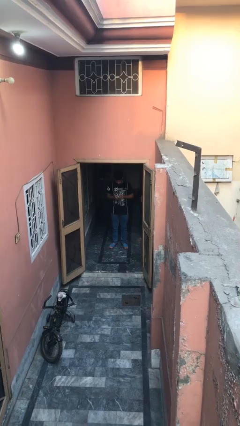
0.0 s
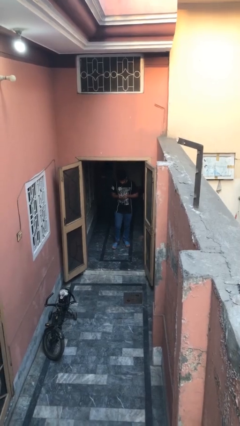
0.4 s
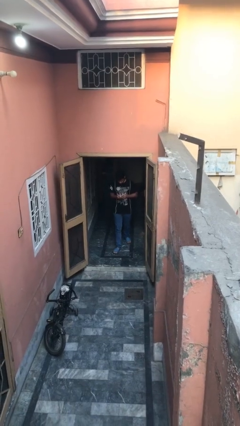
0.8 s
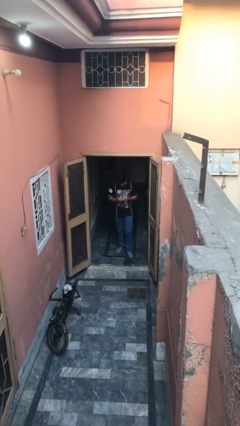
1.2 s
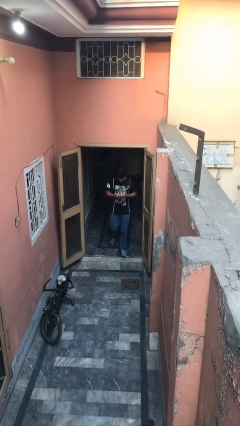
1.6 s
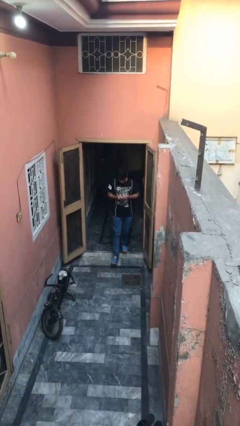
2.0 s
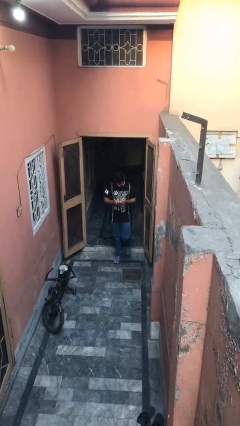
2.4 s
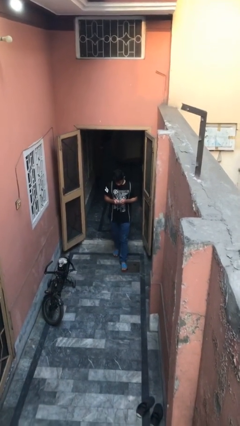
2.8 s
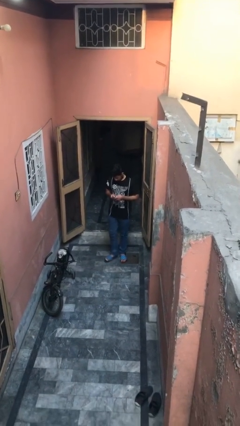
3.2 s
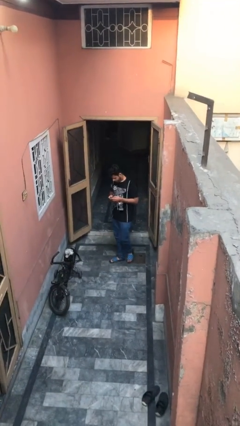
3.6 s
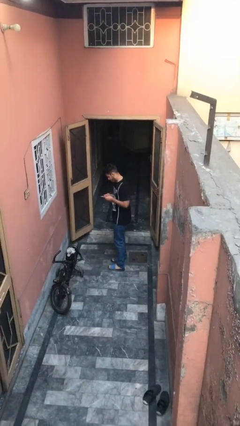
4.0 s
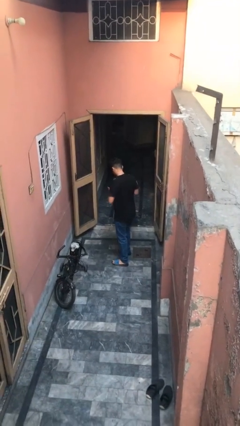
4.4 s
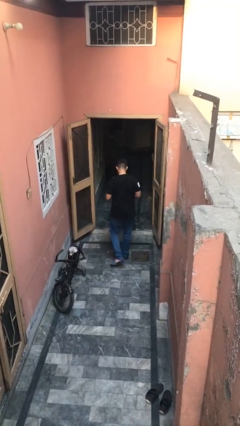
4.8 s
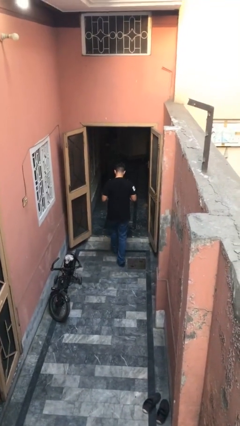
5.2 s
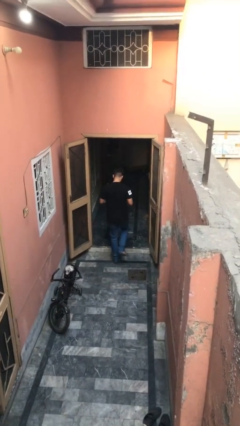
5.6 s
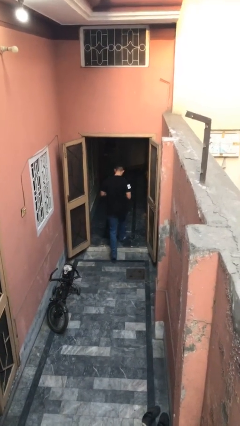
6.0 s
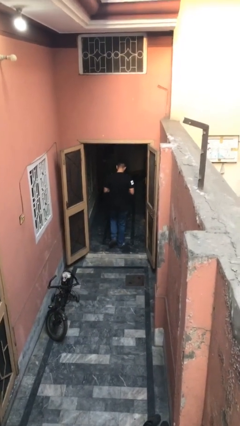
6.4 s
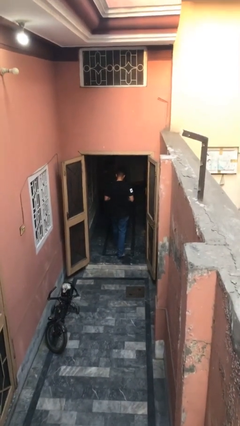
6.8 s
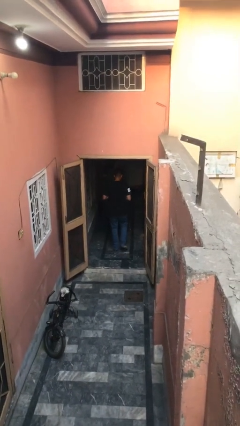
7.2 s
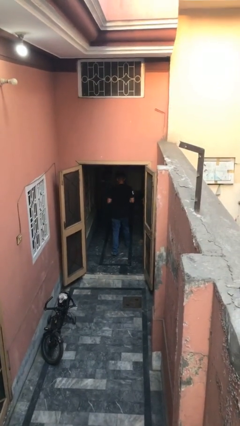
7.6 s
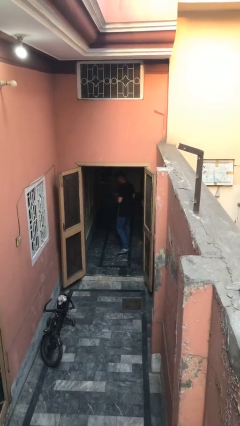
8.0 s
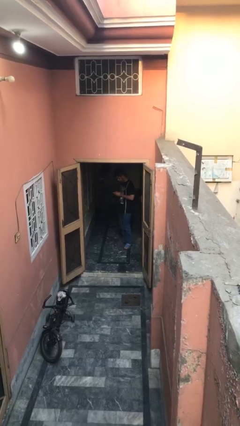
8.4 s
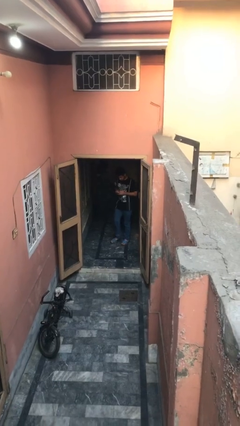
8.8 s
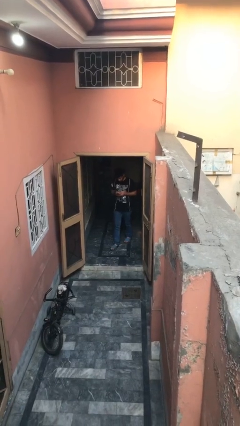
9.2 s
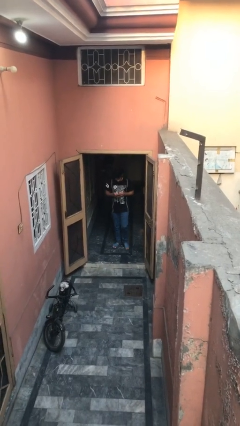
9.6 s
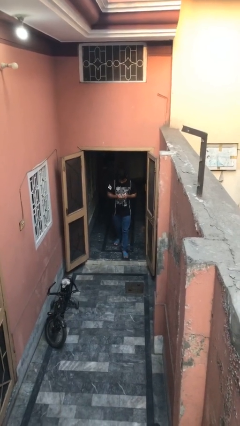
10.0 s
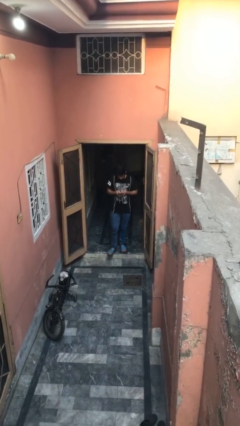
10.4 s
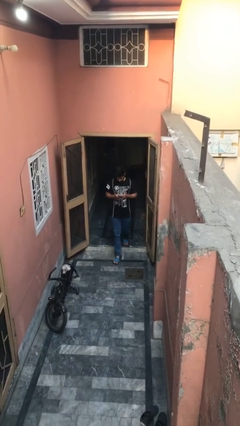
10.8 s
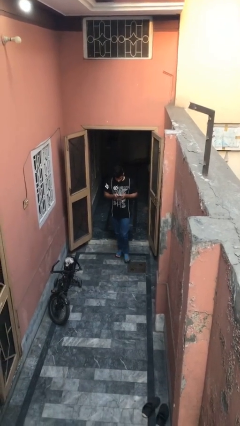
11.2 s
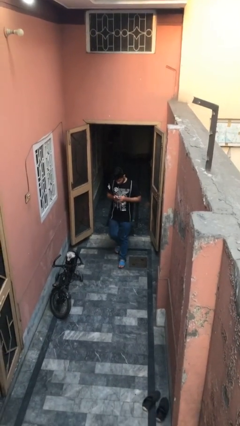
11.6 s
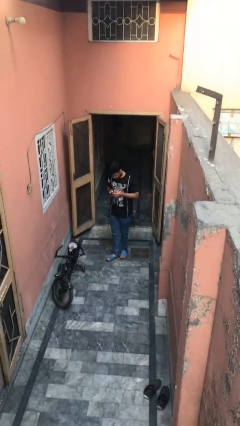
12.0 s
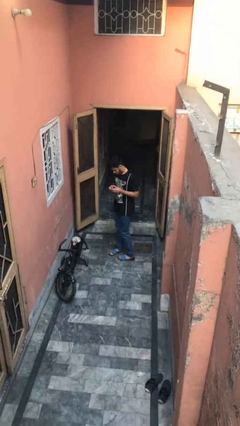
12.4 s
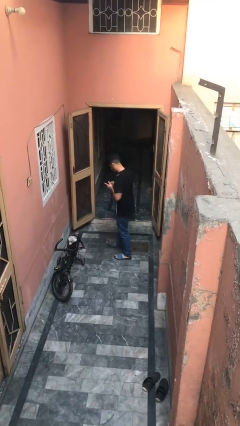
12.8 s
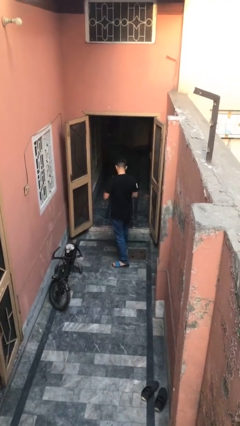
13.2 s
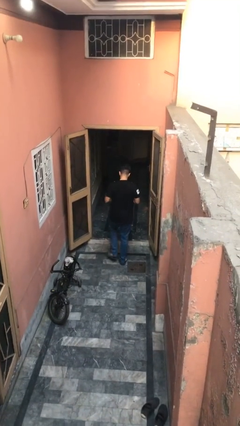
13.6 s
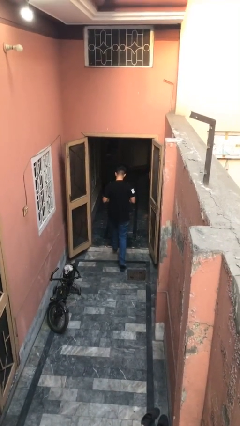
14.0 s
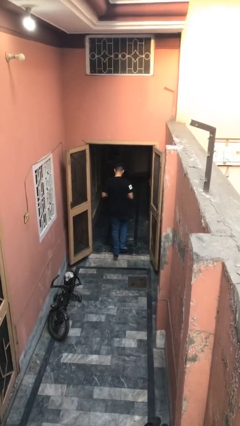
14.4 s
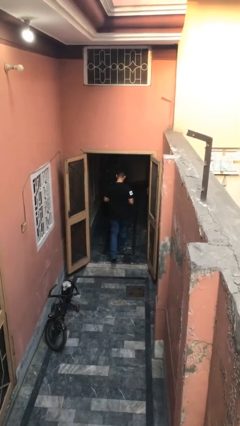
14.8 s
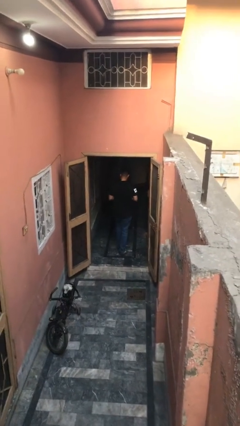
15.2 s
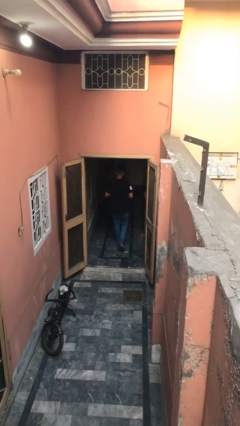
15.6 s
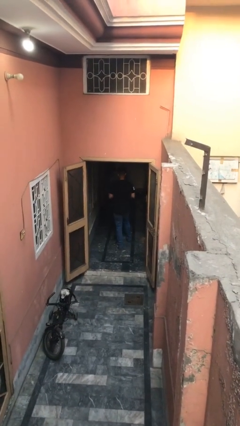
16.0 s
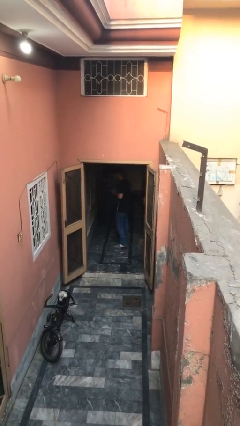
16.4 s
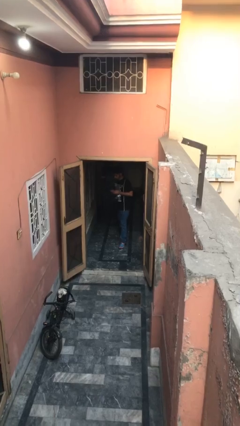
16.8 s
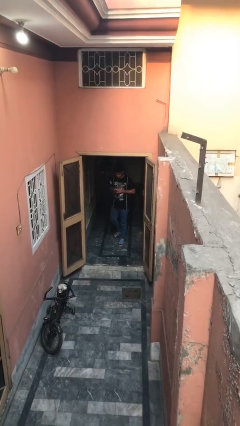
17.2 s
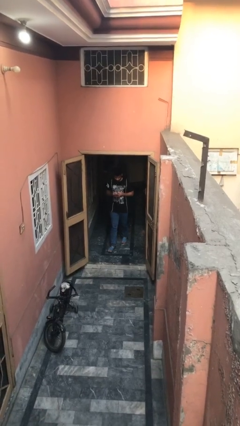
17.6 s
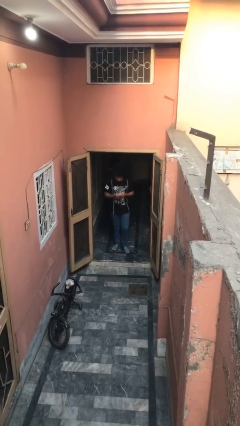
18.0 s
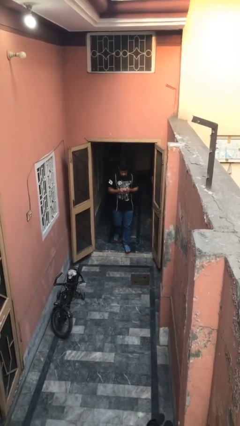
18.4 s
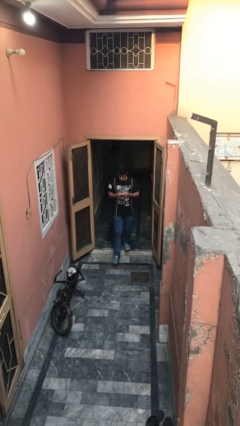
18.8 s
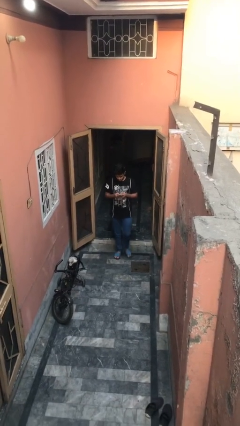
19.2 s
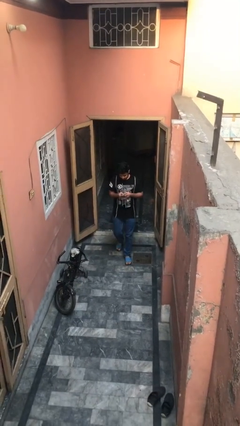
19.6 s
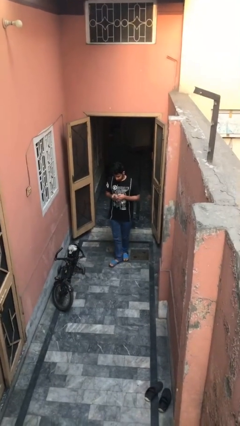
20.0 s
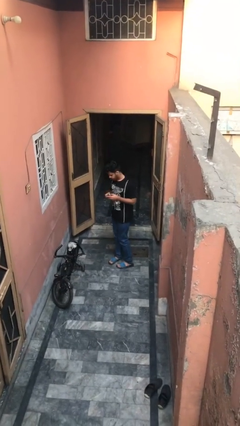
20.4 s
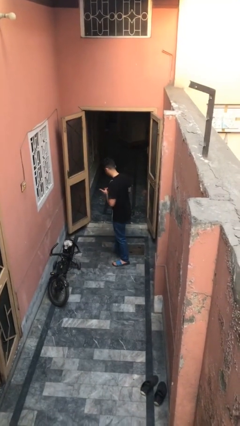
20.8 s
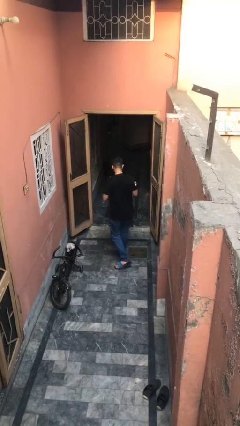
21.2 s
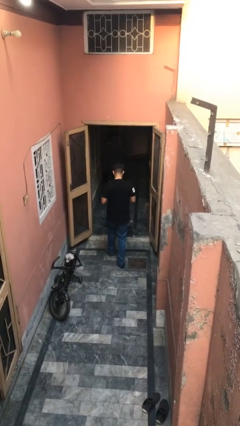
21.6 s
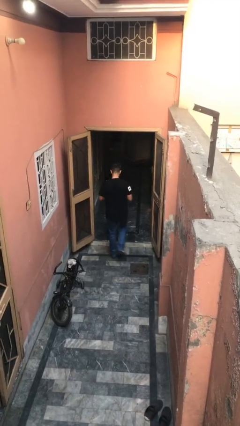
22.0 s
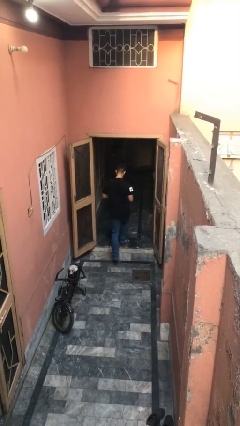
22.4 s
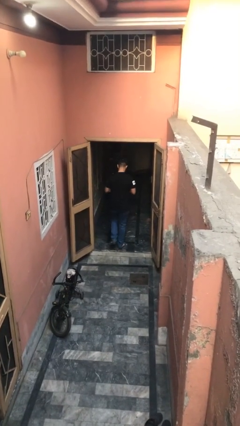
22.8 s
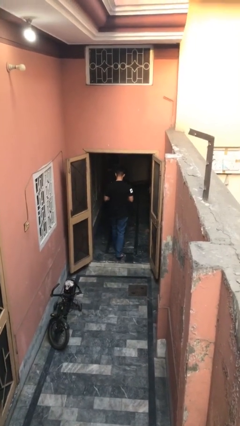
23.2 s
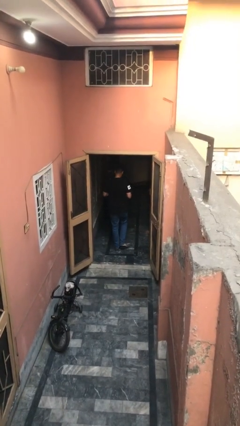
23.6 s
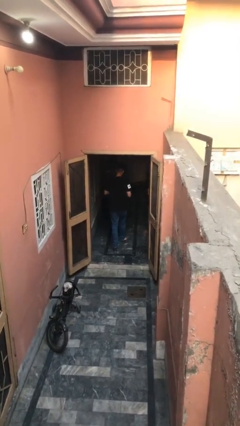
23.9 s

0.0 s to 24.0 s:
person texts on phone

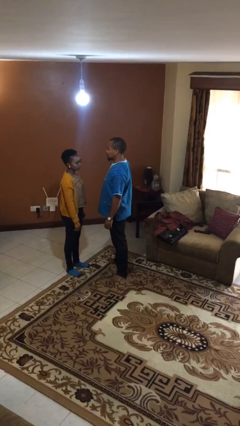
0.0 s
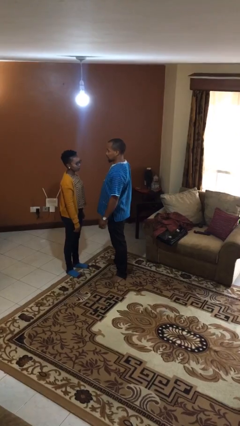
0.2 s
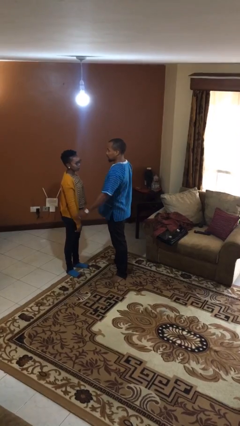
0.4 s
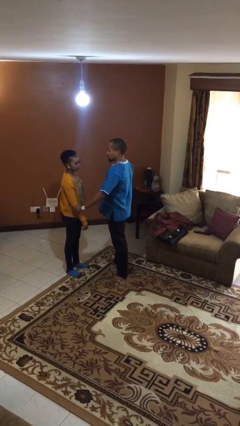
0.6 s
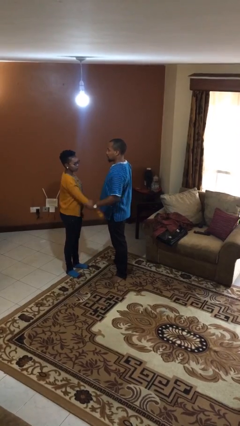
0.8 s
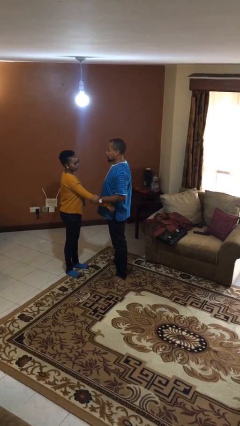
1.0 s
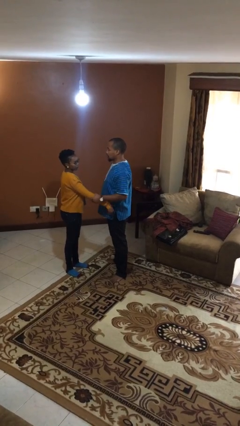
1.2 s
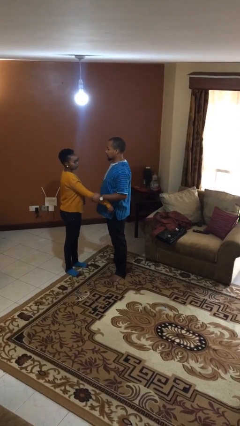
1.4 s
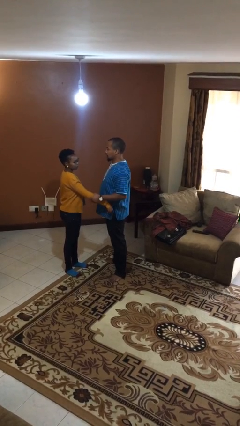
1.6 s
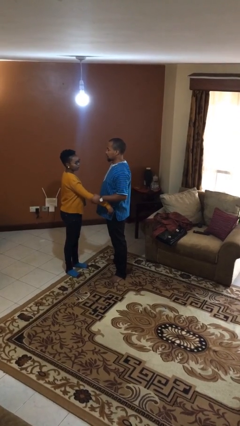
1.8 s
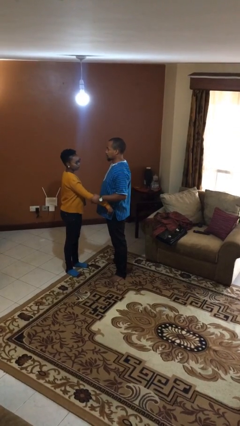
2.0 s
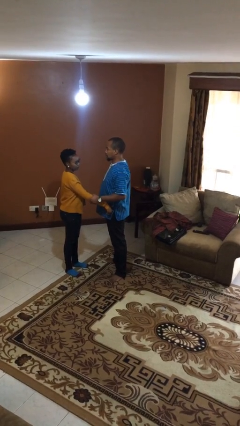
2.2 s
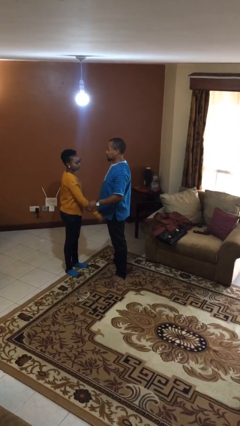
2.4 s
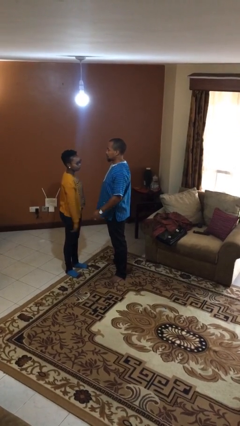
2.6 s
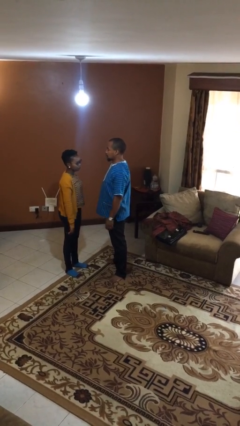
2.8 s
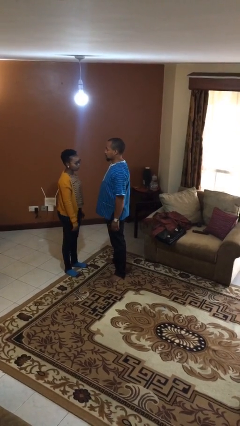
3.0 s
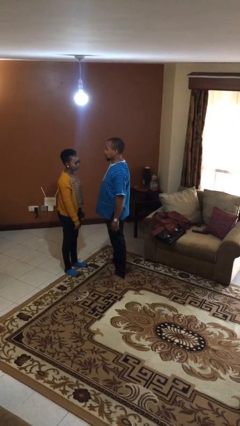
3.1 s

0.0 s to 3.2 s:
person grabs person by forearm

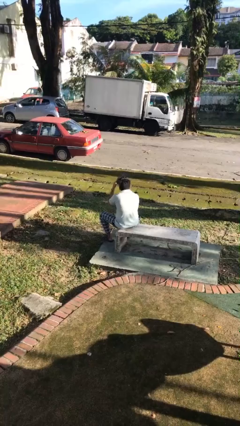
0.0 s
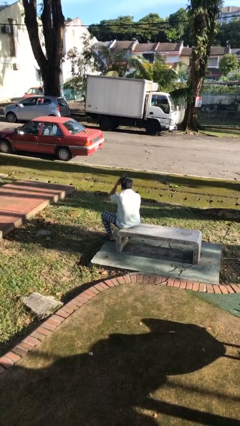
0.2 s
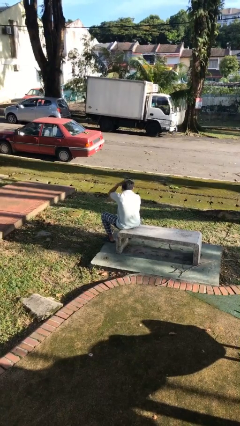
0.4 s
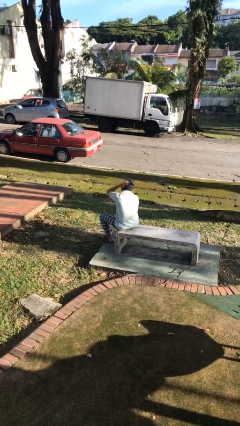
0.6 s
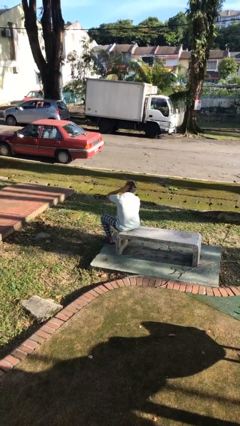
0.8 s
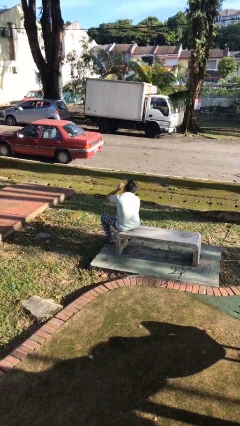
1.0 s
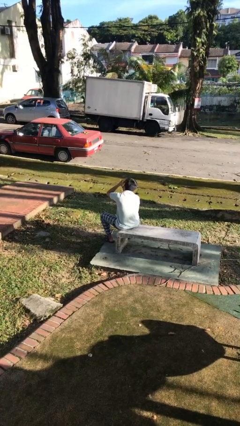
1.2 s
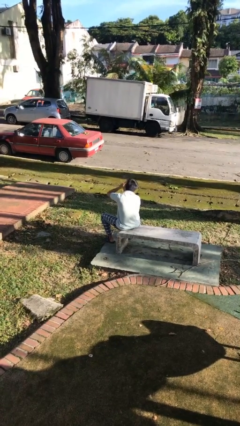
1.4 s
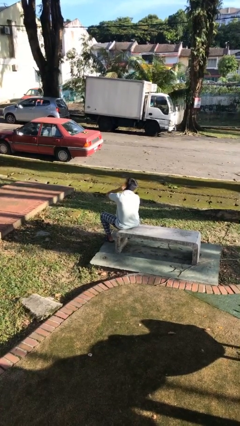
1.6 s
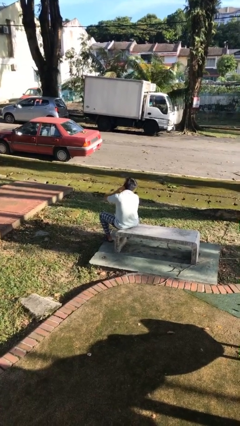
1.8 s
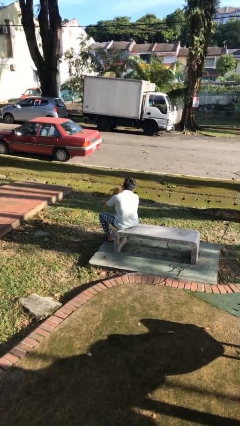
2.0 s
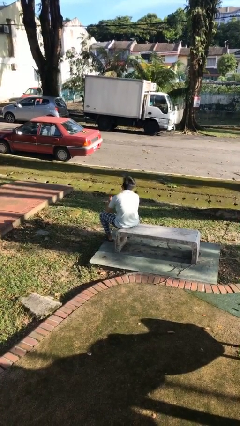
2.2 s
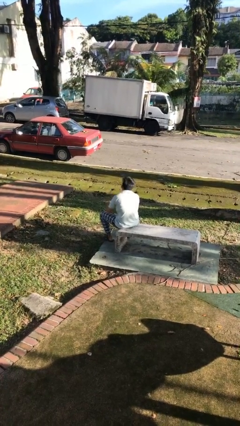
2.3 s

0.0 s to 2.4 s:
person strokes hair

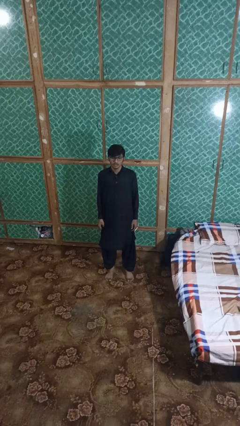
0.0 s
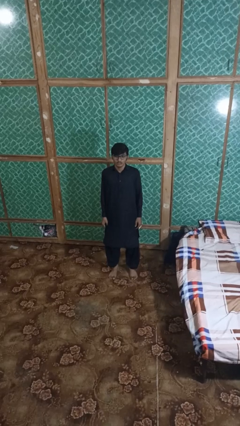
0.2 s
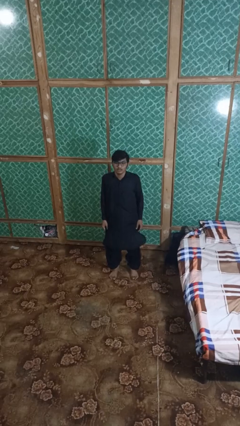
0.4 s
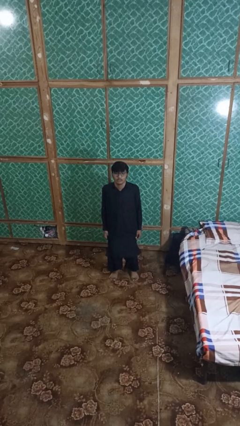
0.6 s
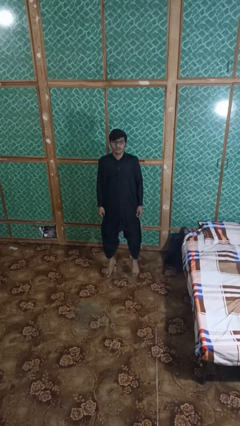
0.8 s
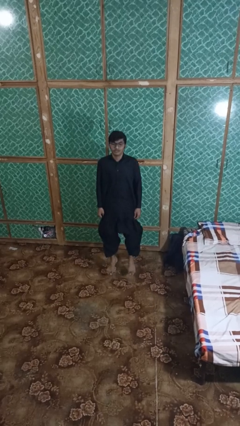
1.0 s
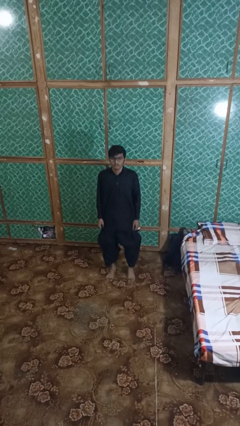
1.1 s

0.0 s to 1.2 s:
person jumps
